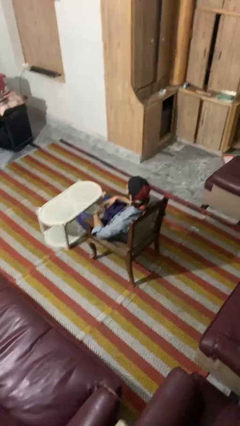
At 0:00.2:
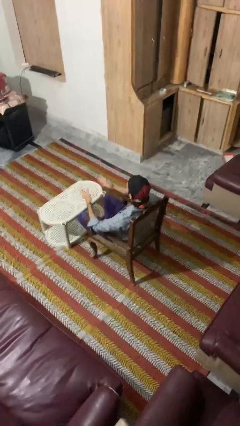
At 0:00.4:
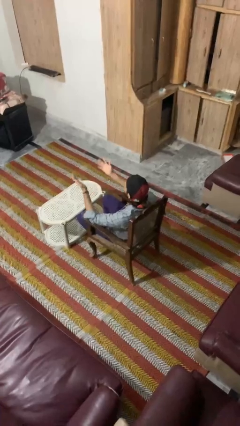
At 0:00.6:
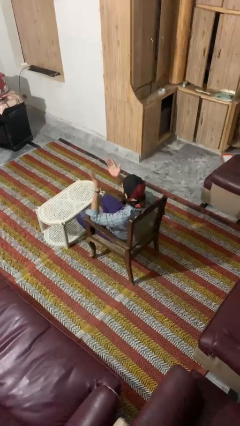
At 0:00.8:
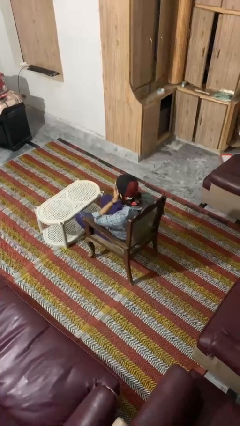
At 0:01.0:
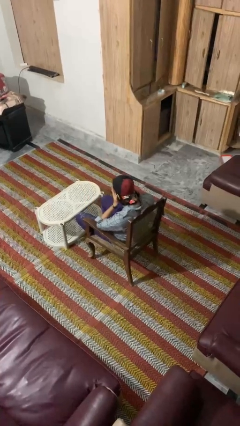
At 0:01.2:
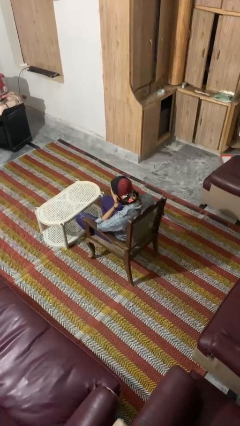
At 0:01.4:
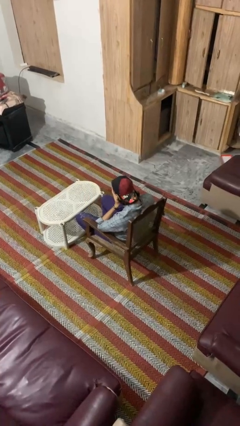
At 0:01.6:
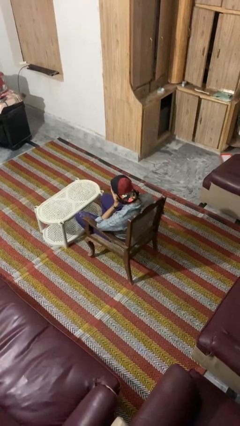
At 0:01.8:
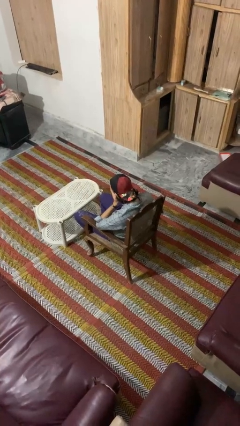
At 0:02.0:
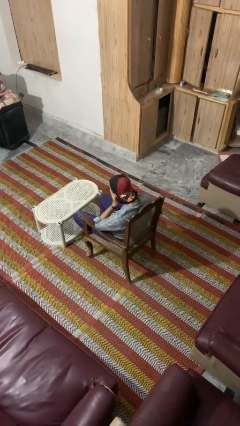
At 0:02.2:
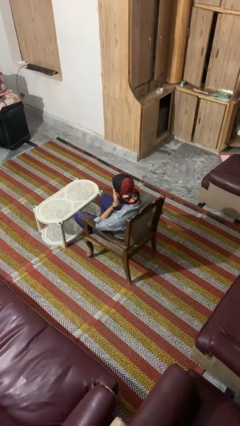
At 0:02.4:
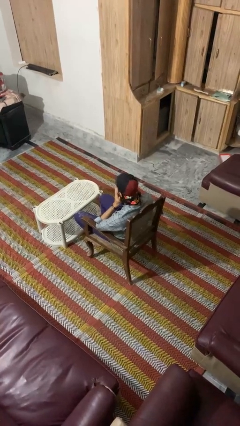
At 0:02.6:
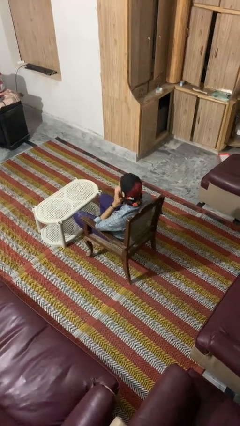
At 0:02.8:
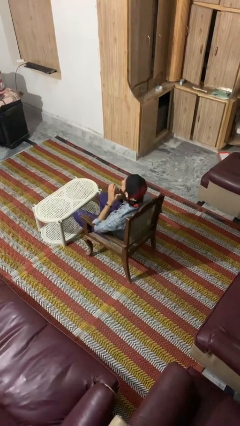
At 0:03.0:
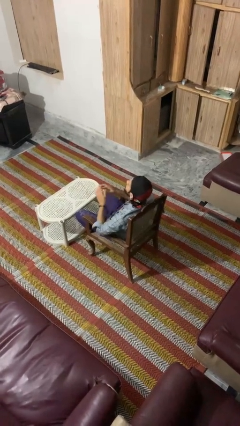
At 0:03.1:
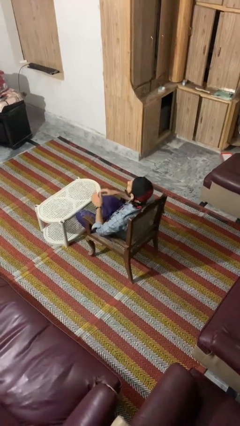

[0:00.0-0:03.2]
person covers face with hands

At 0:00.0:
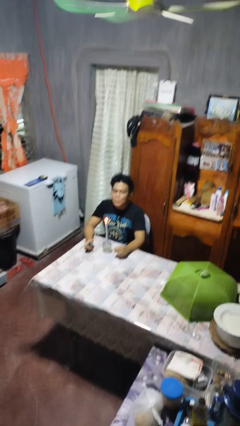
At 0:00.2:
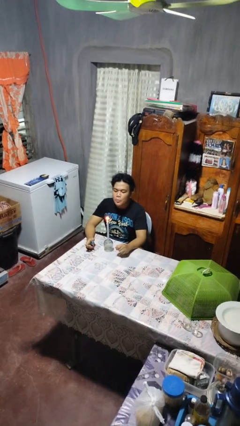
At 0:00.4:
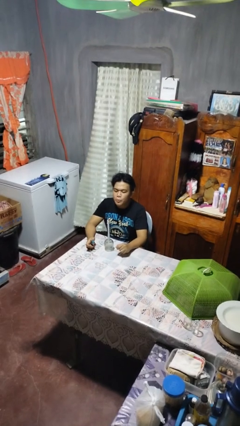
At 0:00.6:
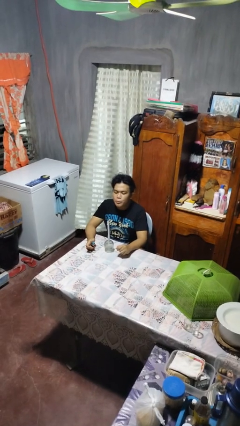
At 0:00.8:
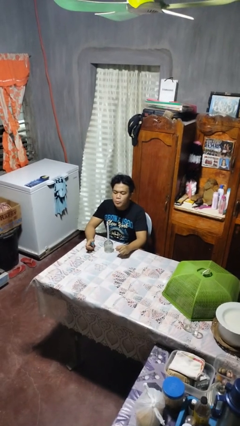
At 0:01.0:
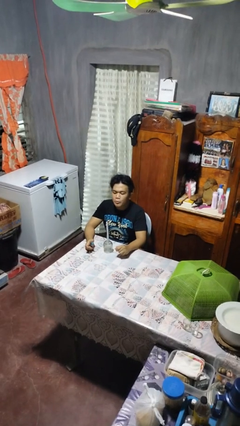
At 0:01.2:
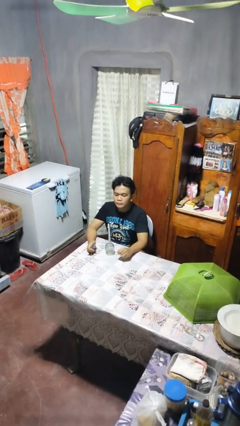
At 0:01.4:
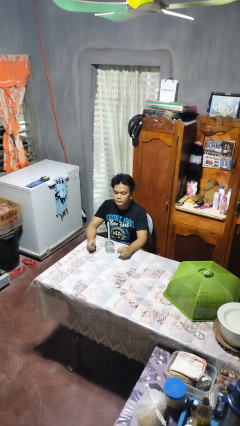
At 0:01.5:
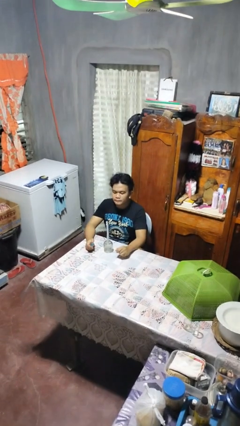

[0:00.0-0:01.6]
person extinguishes candle

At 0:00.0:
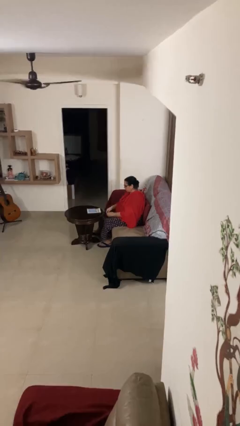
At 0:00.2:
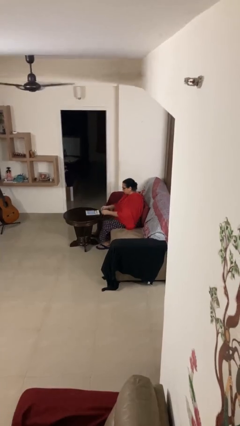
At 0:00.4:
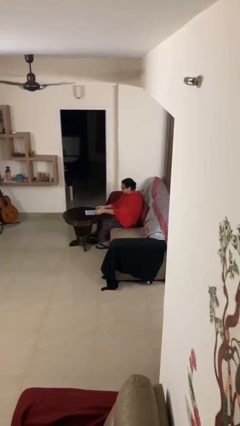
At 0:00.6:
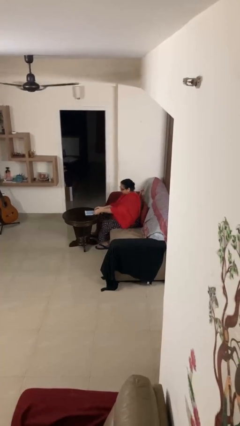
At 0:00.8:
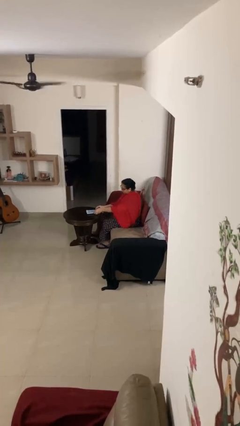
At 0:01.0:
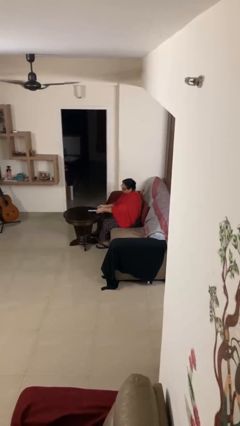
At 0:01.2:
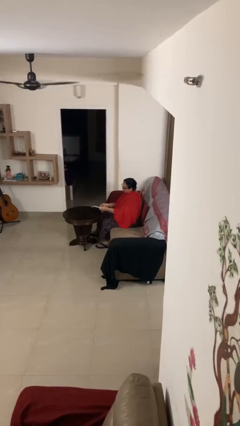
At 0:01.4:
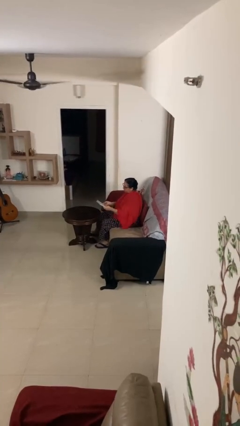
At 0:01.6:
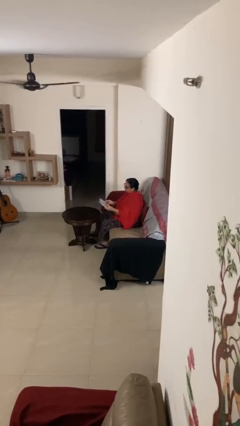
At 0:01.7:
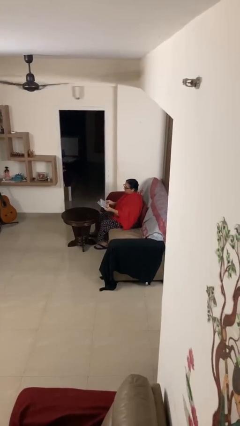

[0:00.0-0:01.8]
person picks up object from table

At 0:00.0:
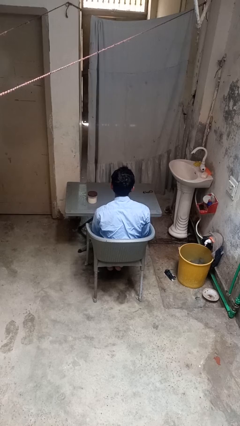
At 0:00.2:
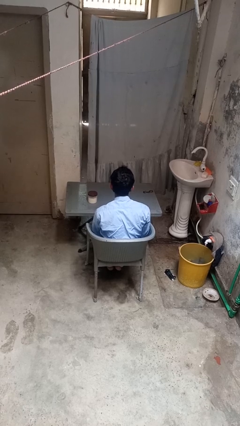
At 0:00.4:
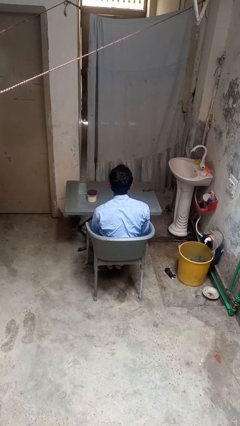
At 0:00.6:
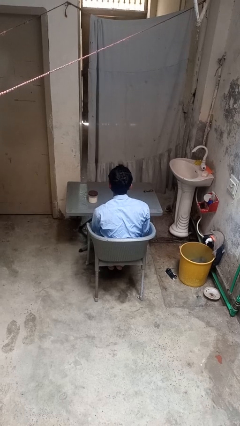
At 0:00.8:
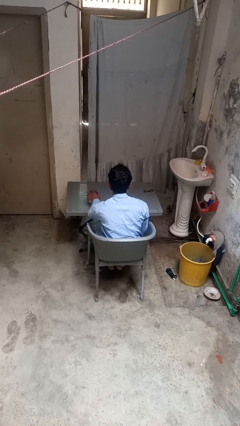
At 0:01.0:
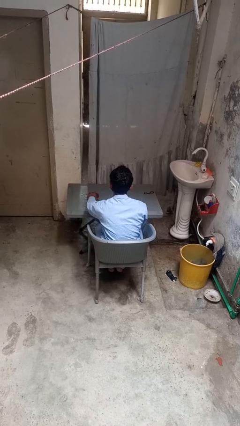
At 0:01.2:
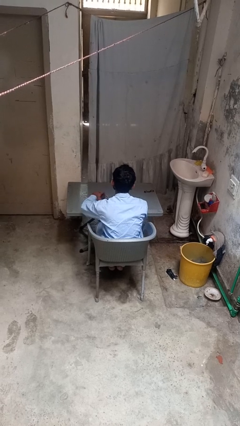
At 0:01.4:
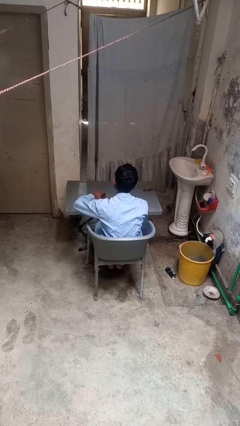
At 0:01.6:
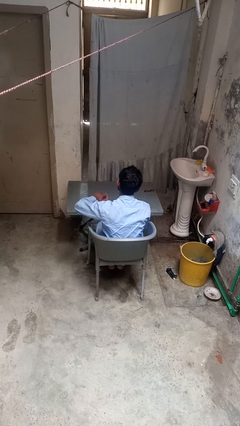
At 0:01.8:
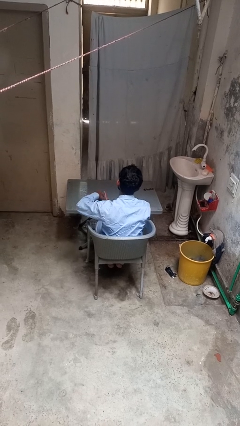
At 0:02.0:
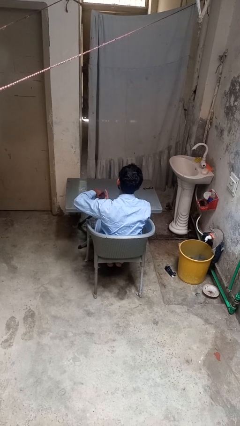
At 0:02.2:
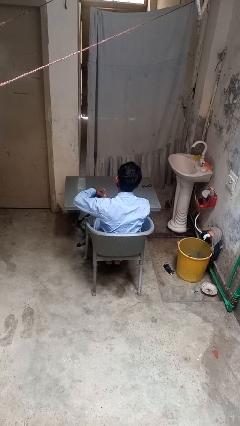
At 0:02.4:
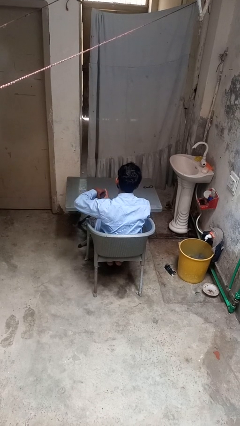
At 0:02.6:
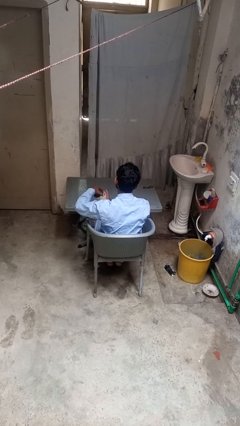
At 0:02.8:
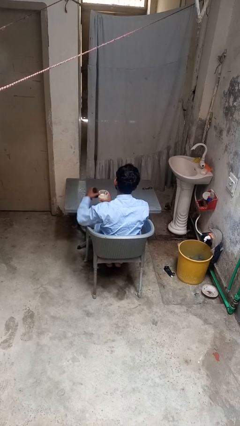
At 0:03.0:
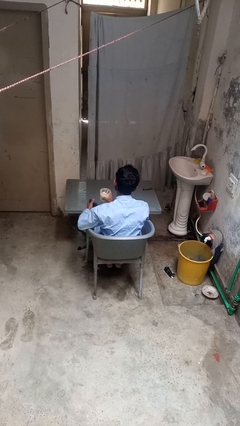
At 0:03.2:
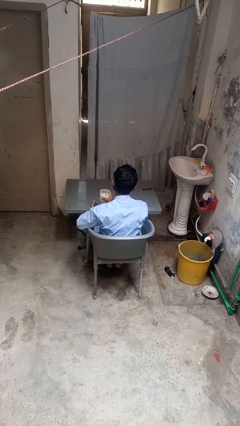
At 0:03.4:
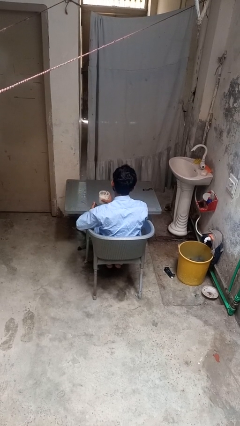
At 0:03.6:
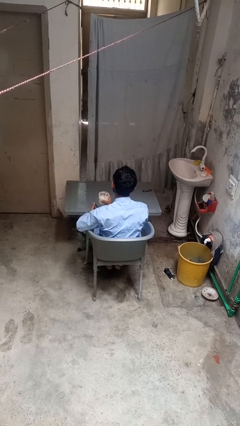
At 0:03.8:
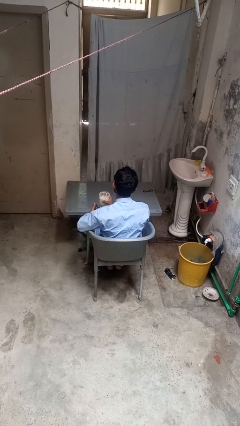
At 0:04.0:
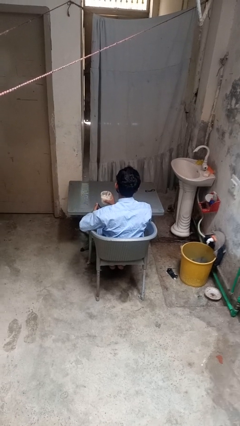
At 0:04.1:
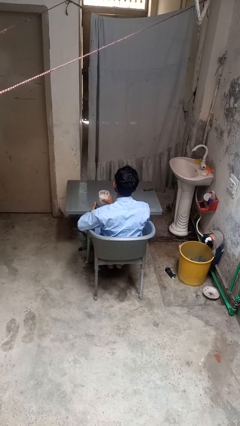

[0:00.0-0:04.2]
person opens jar

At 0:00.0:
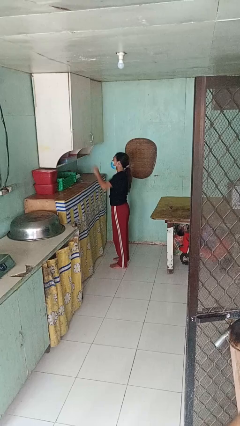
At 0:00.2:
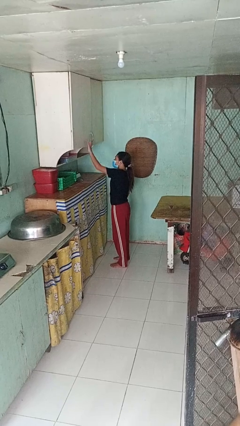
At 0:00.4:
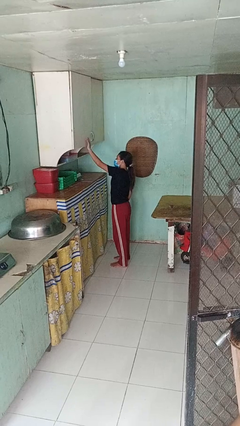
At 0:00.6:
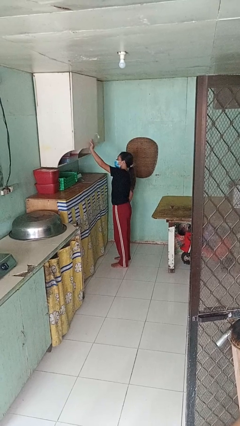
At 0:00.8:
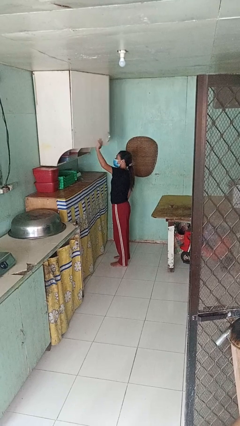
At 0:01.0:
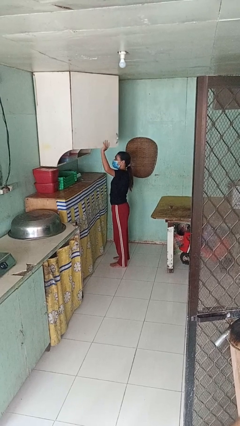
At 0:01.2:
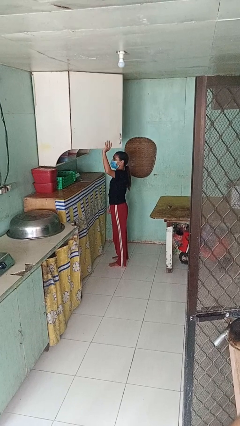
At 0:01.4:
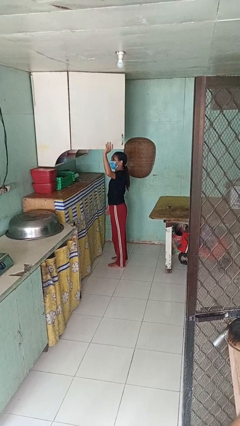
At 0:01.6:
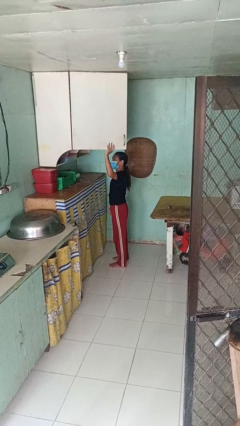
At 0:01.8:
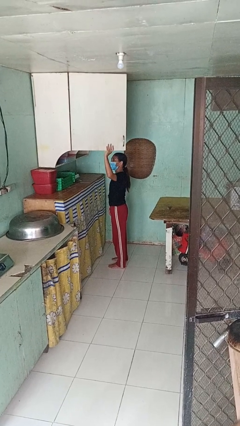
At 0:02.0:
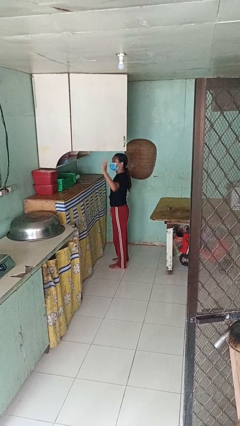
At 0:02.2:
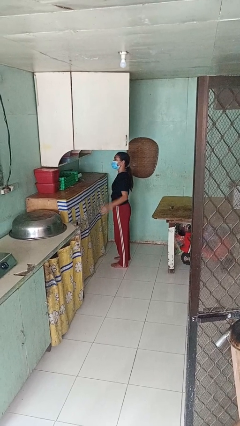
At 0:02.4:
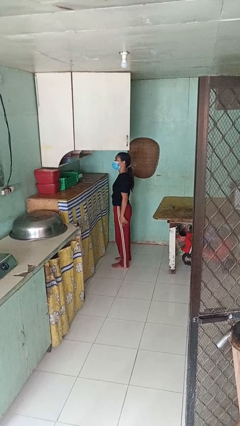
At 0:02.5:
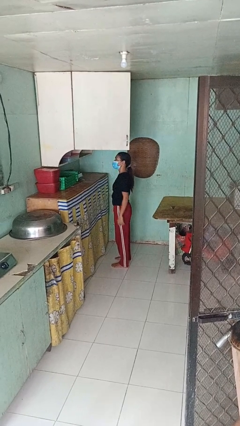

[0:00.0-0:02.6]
person opens cabinet

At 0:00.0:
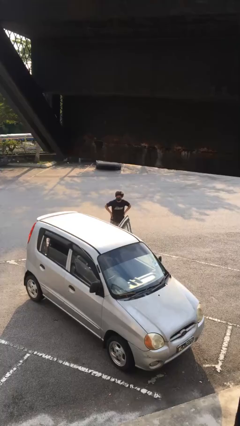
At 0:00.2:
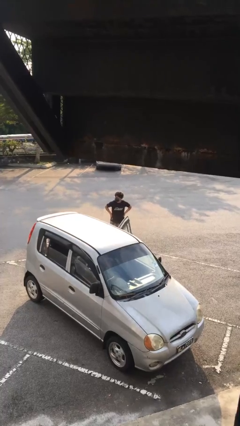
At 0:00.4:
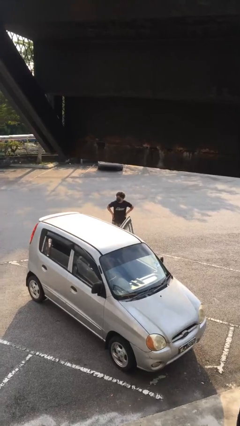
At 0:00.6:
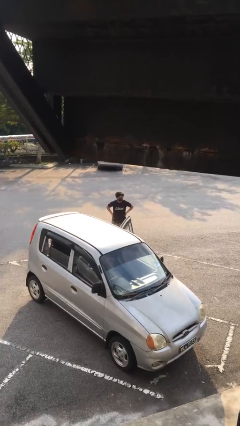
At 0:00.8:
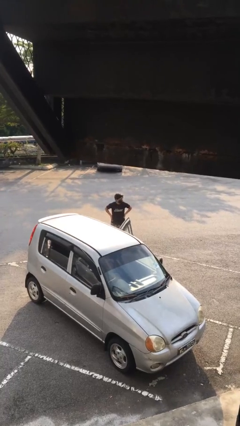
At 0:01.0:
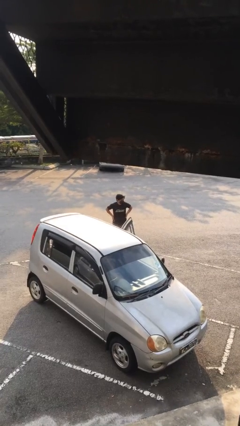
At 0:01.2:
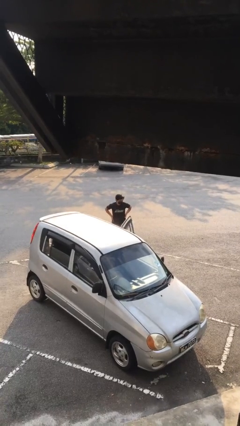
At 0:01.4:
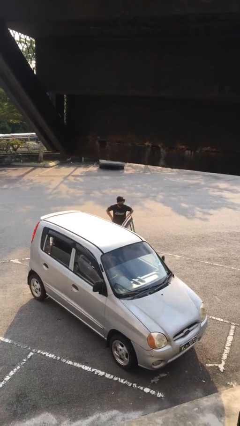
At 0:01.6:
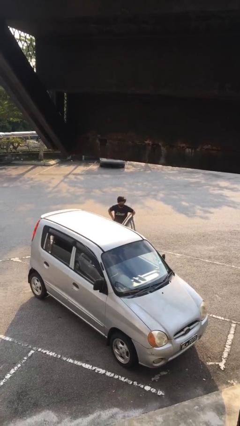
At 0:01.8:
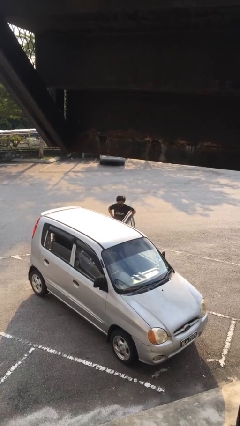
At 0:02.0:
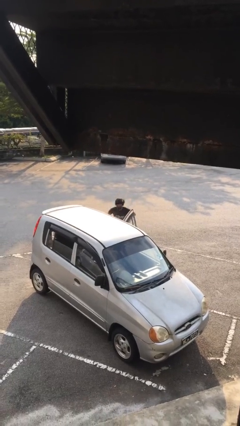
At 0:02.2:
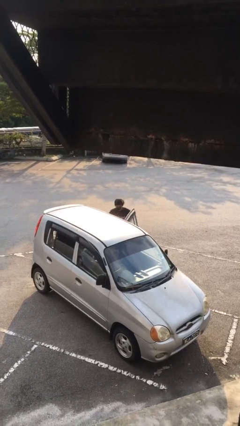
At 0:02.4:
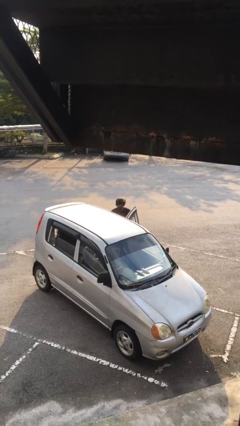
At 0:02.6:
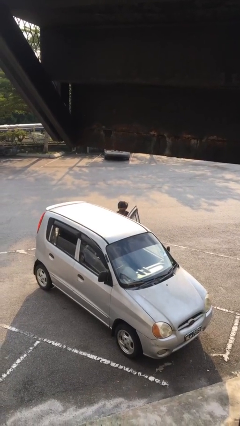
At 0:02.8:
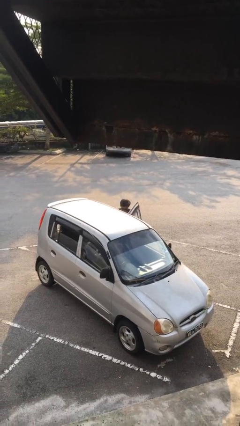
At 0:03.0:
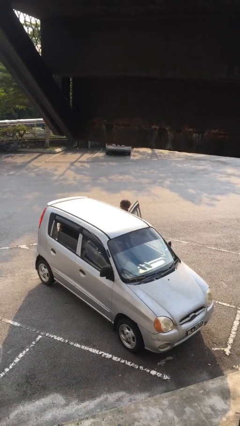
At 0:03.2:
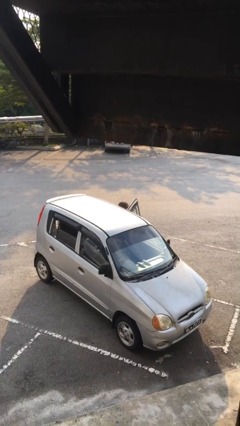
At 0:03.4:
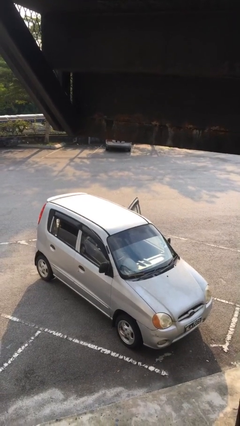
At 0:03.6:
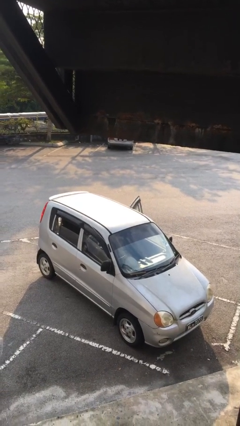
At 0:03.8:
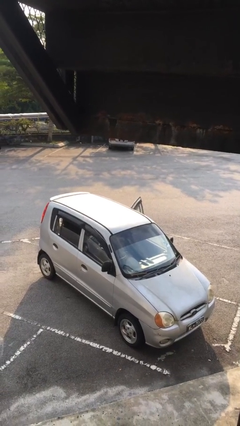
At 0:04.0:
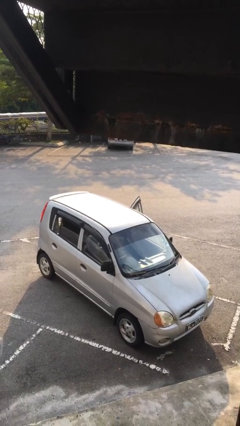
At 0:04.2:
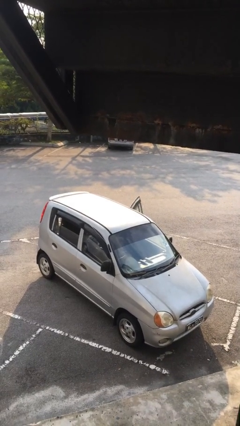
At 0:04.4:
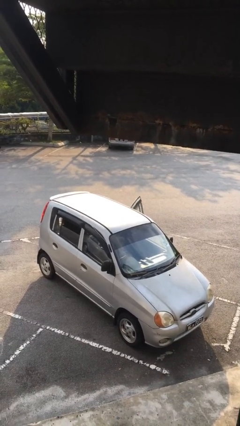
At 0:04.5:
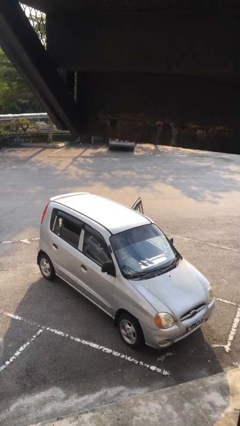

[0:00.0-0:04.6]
person enters car
